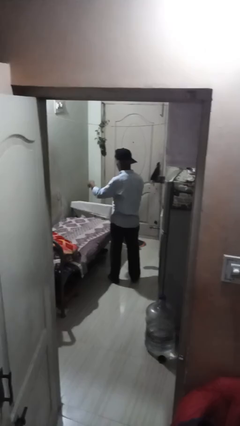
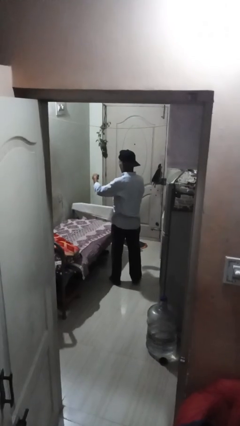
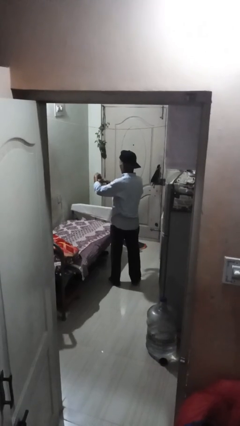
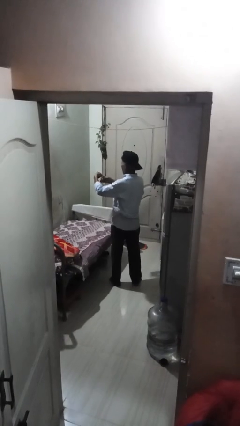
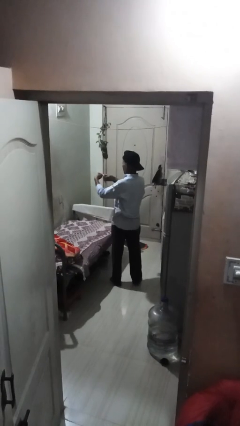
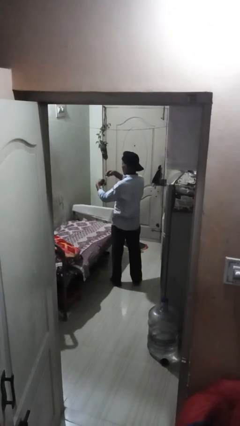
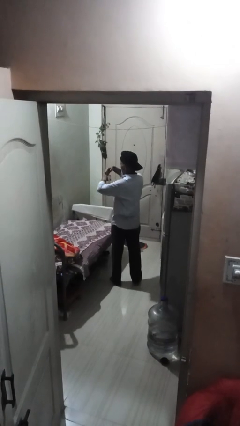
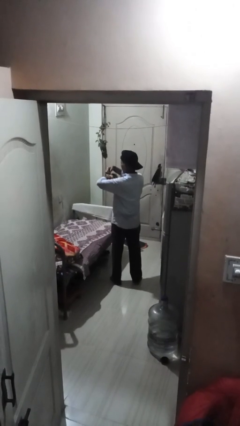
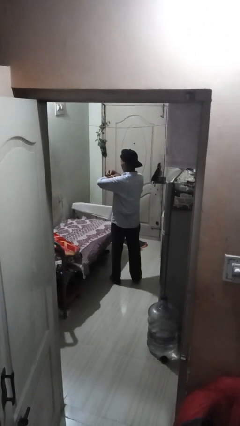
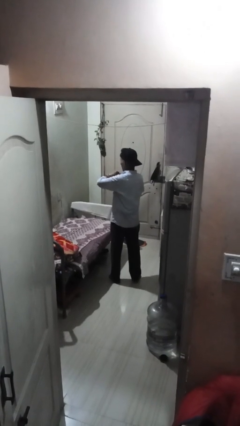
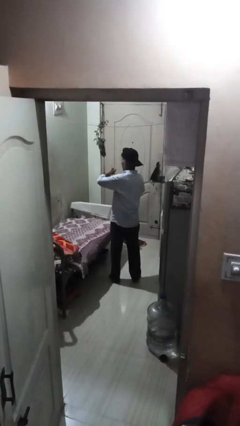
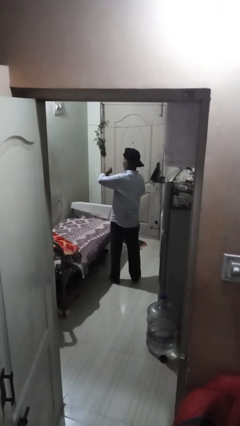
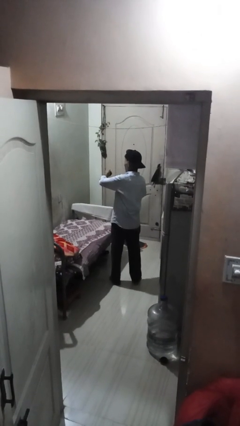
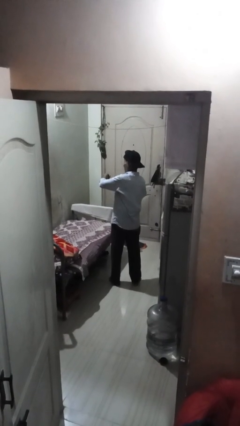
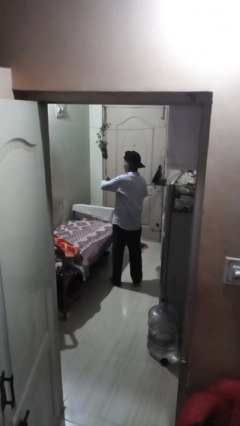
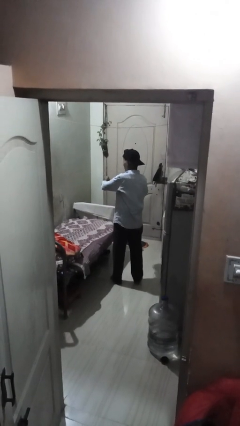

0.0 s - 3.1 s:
person puts on wristwatch

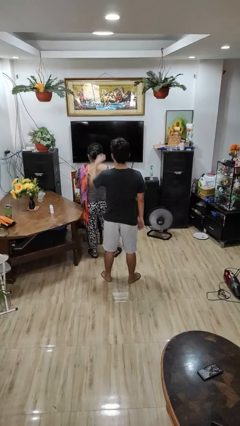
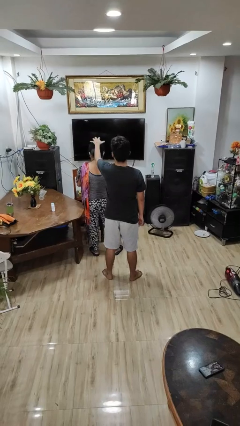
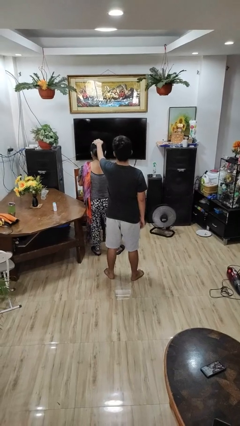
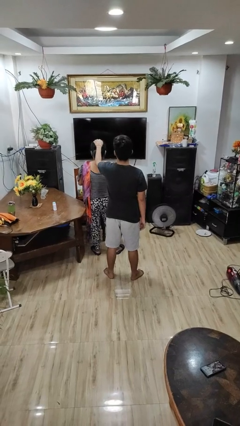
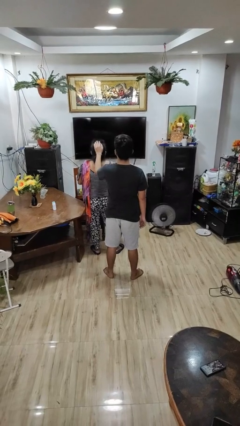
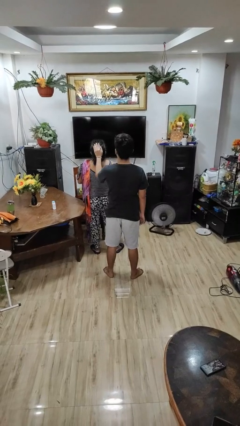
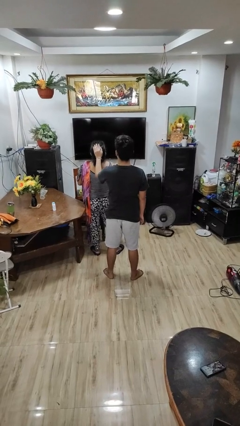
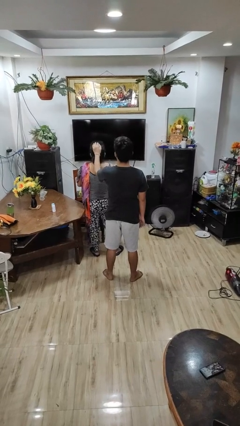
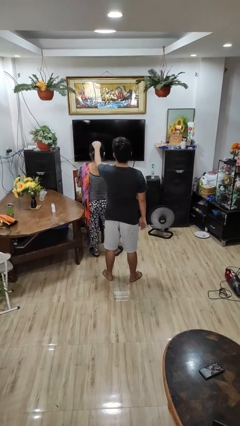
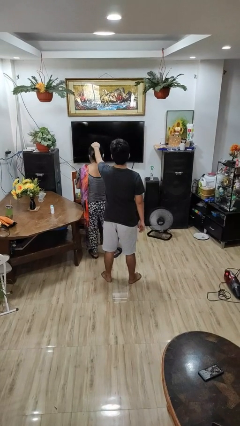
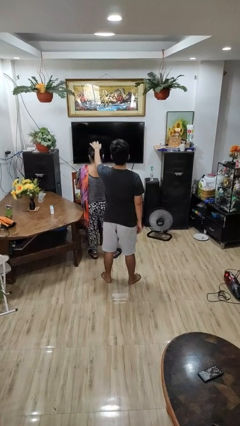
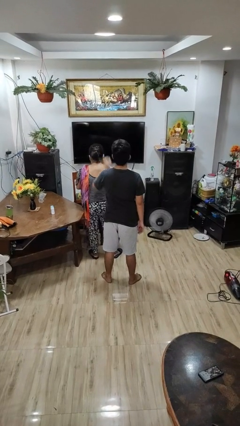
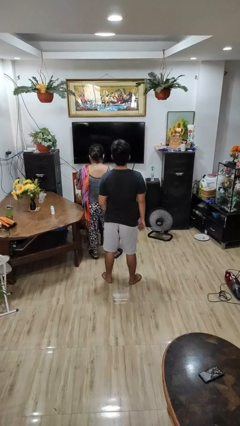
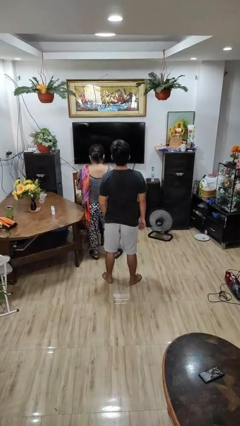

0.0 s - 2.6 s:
person grabs person by hair

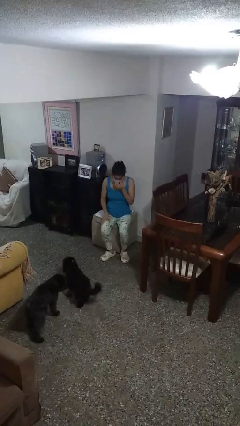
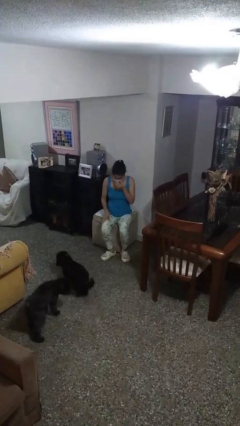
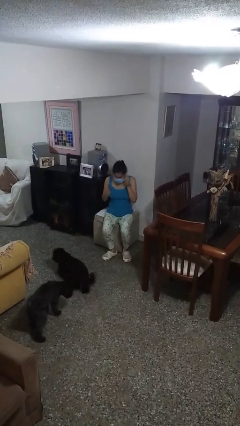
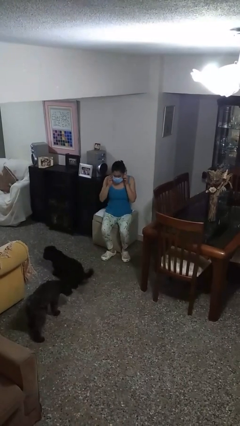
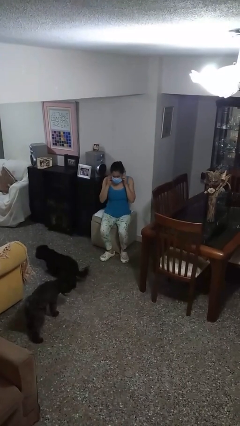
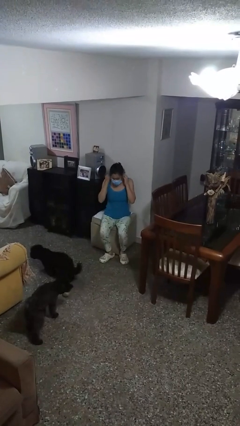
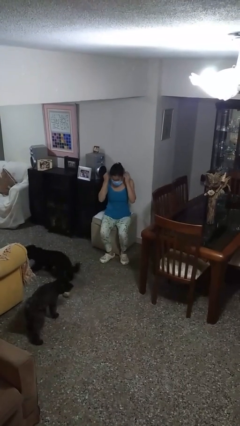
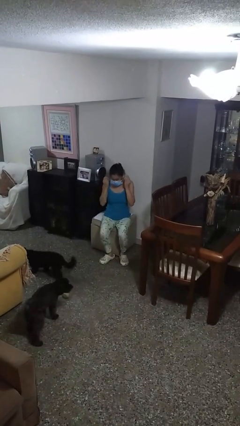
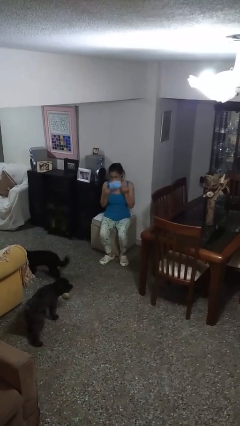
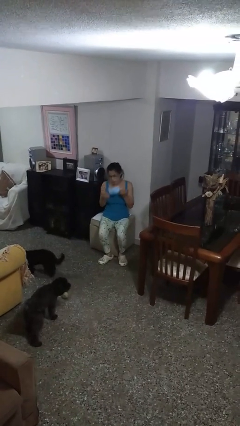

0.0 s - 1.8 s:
person takes off facemask

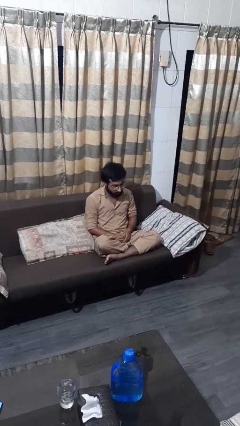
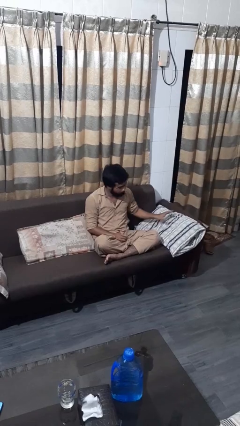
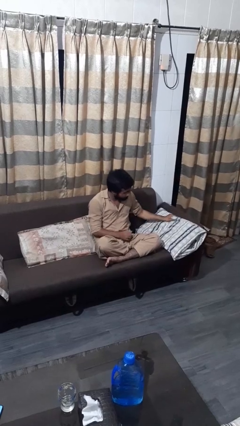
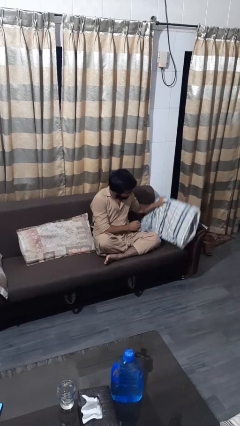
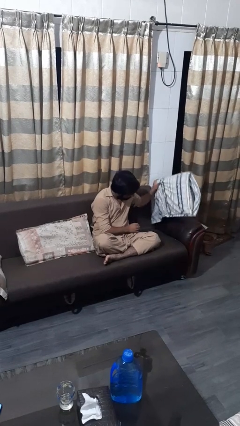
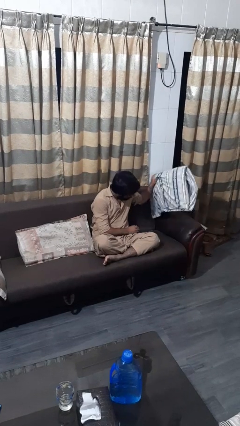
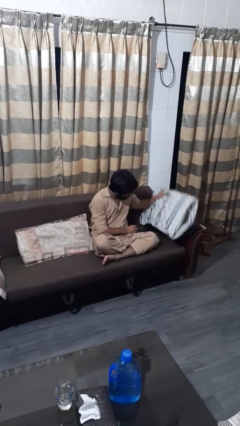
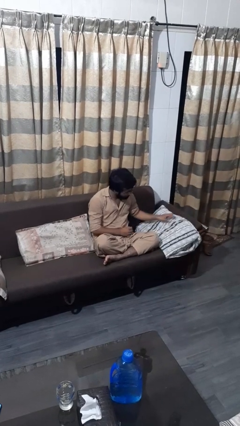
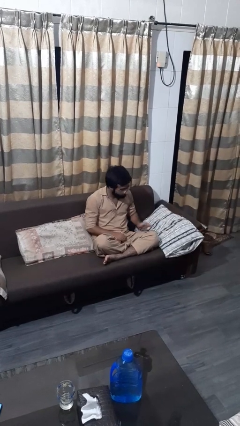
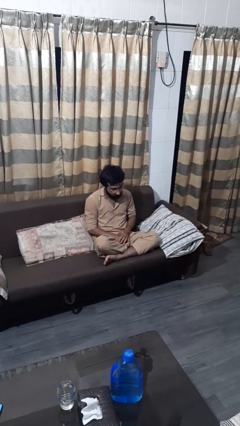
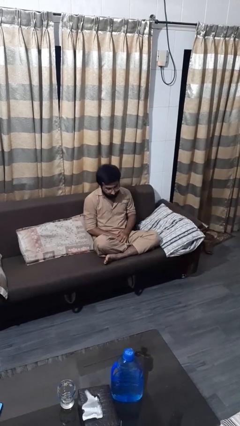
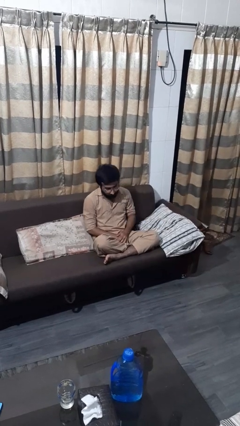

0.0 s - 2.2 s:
person searches in couch

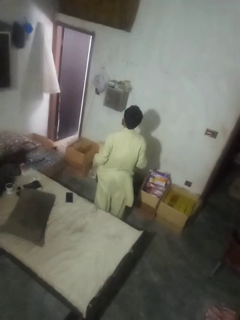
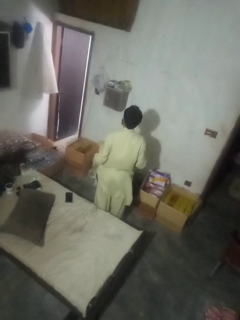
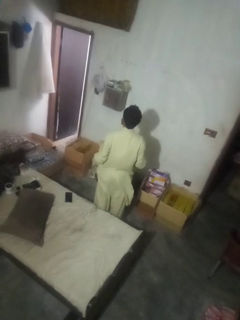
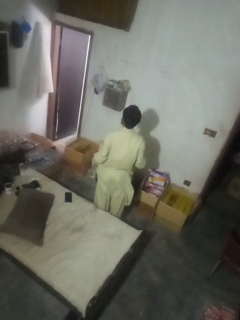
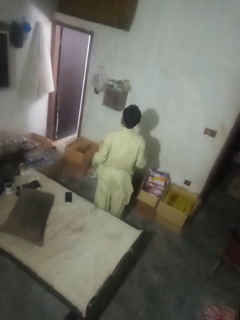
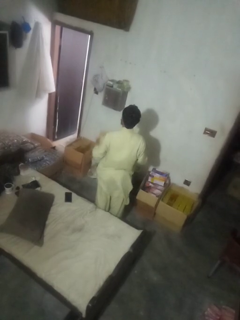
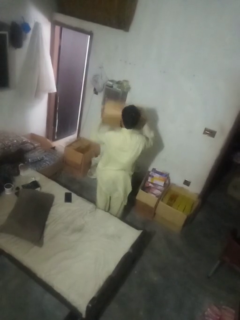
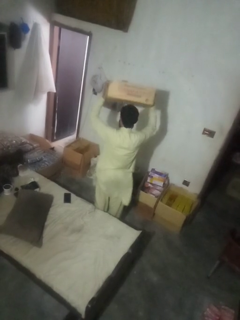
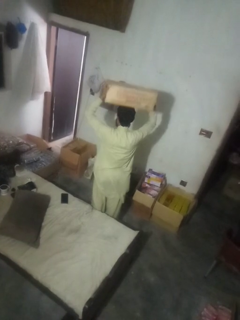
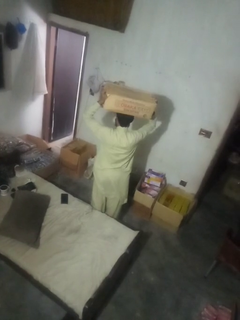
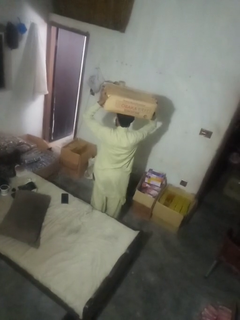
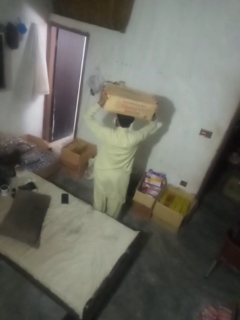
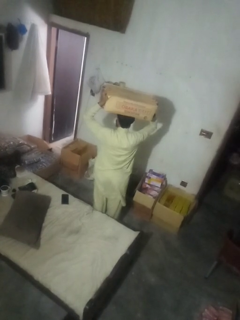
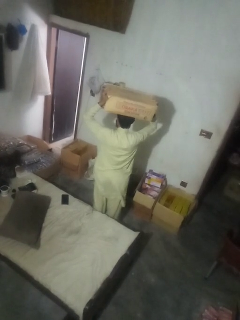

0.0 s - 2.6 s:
person holds object above head

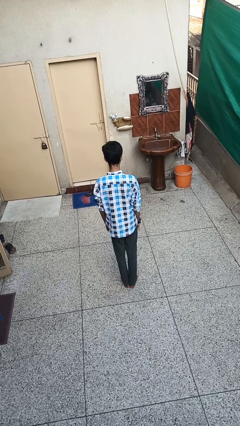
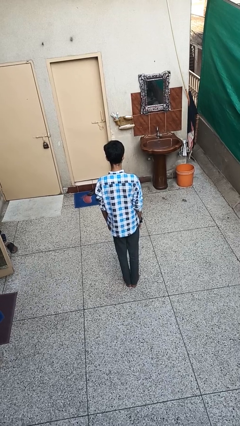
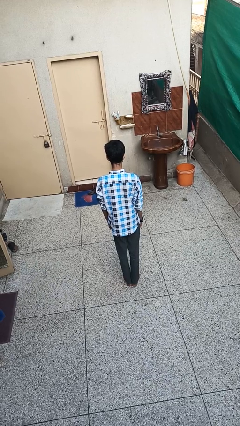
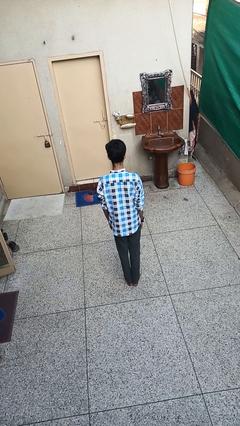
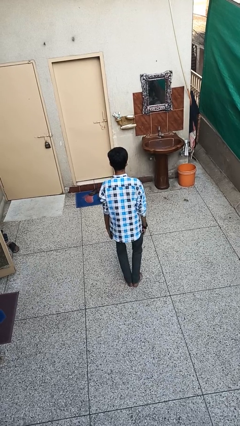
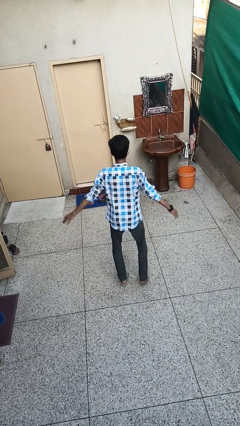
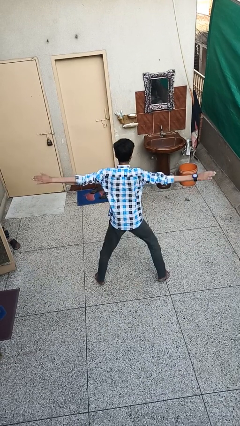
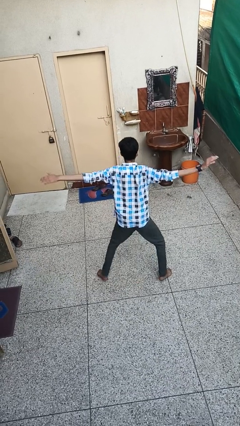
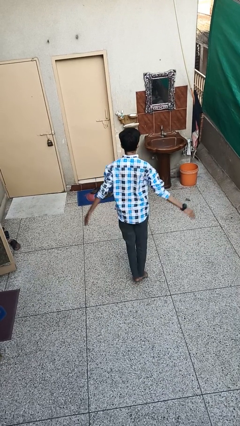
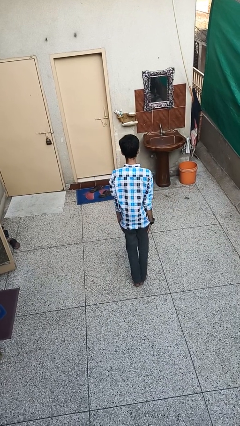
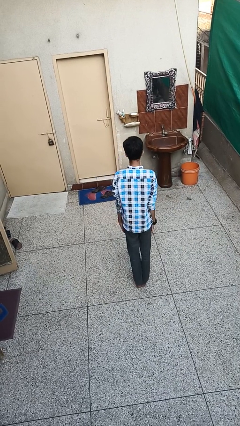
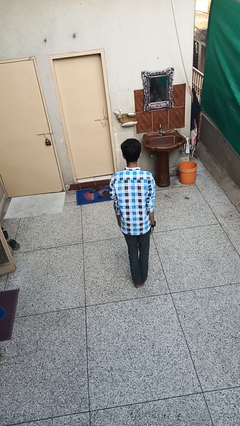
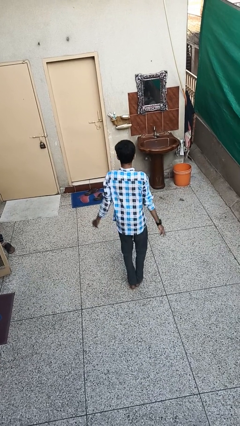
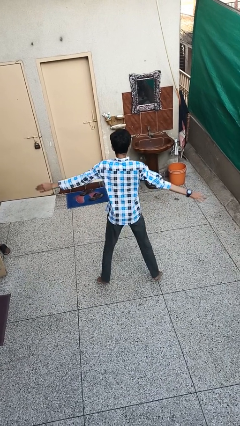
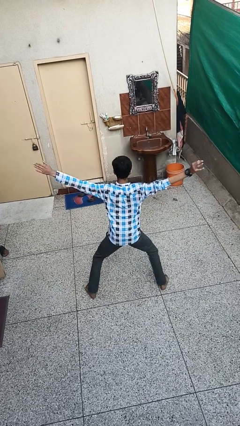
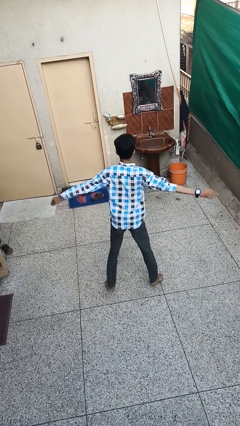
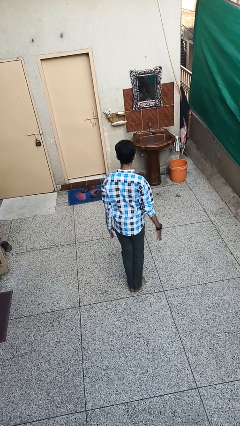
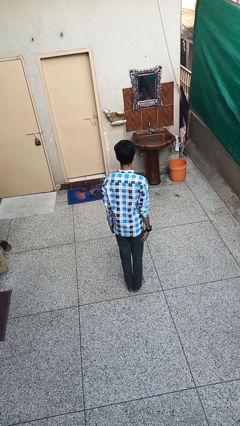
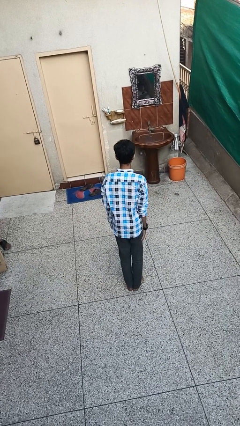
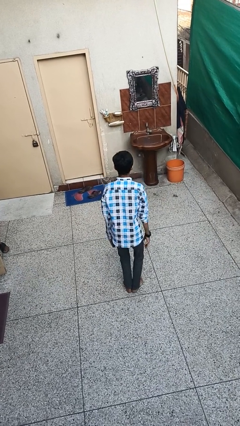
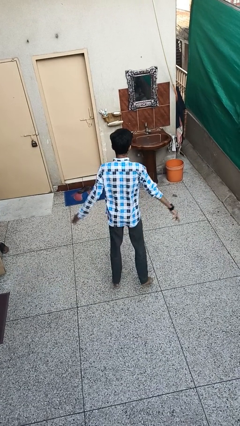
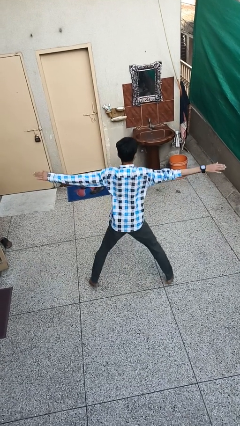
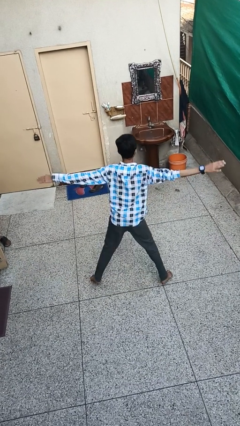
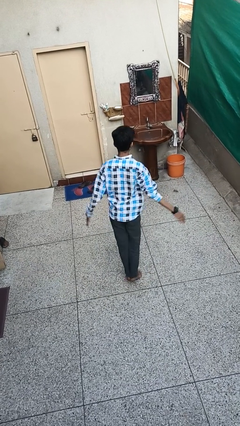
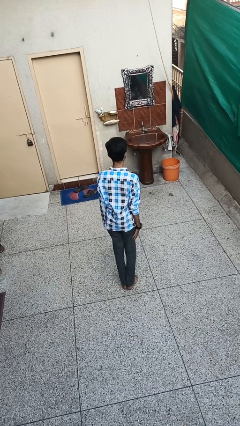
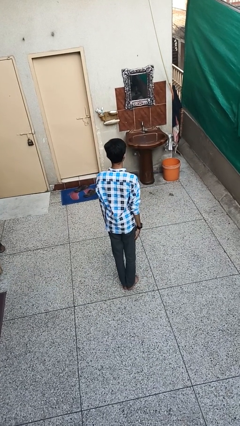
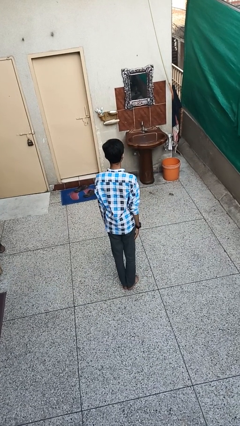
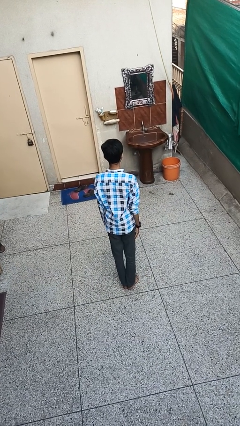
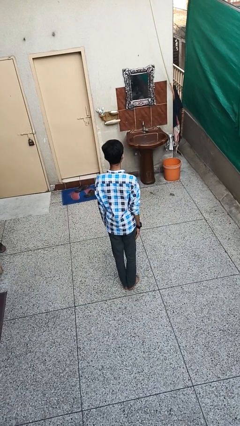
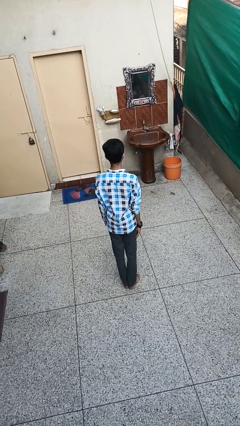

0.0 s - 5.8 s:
person exercises with jumping jacks
